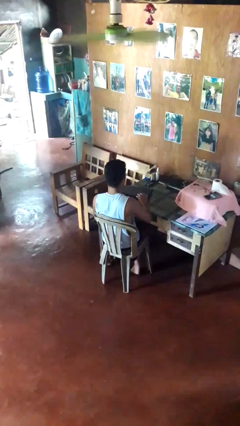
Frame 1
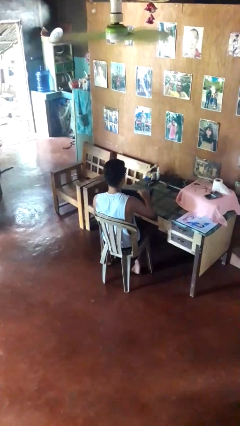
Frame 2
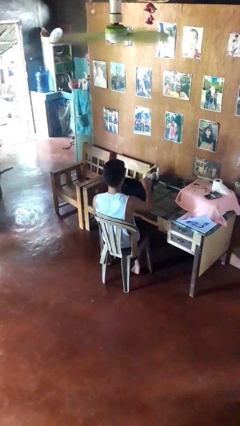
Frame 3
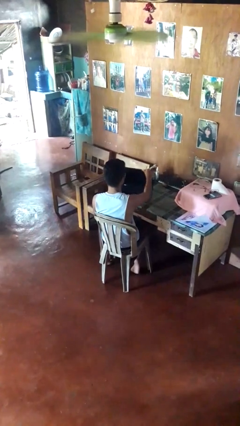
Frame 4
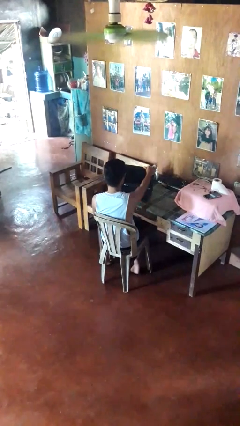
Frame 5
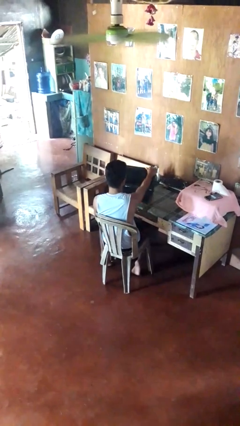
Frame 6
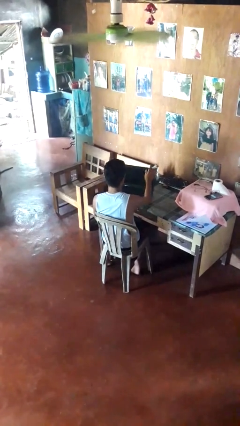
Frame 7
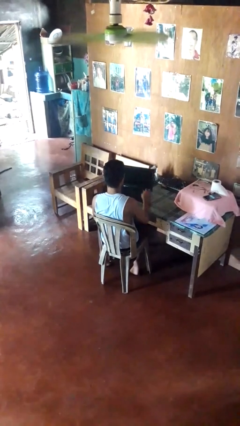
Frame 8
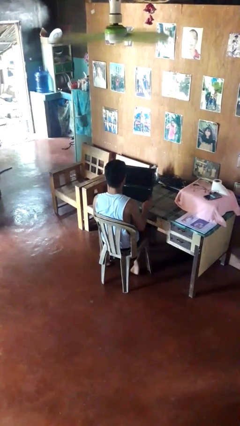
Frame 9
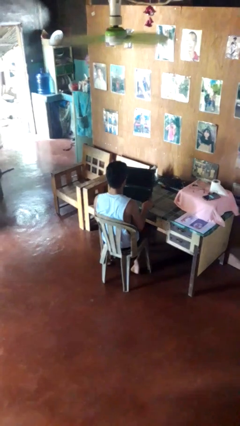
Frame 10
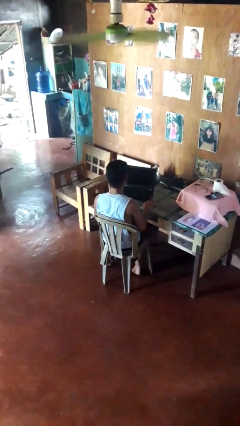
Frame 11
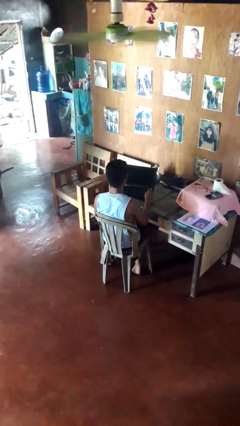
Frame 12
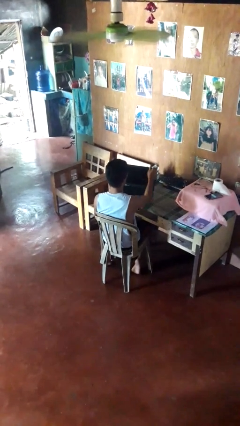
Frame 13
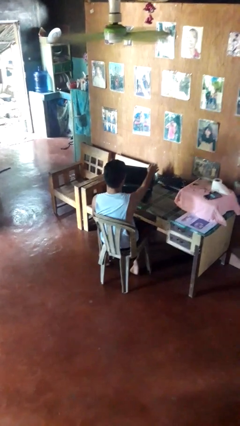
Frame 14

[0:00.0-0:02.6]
person opens laptop

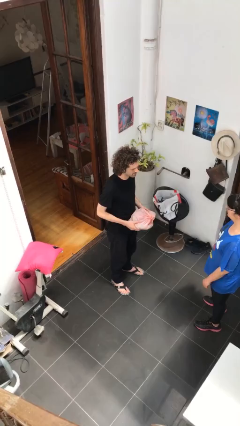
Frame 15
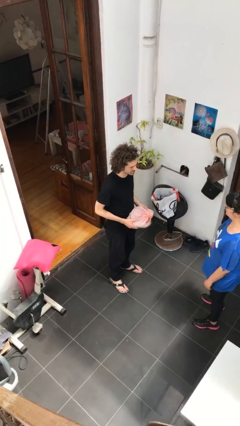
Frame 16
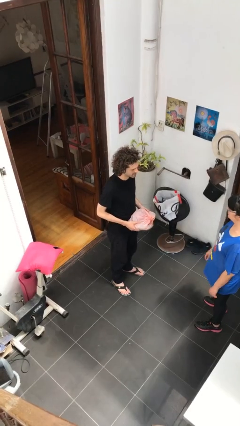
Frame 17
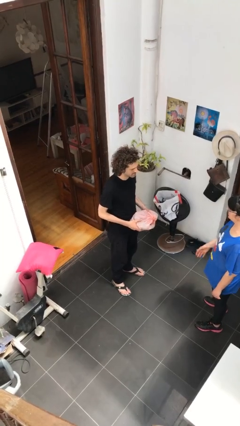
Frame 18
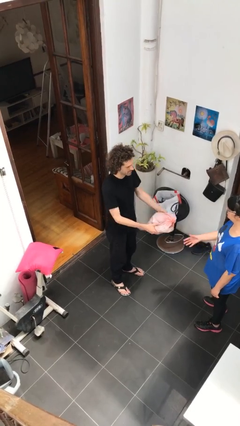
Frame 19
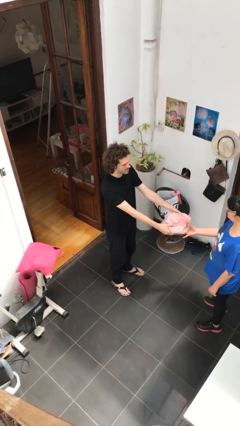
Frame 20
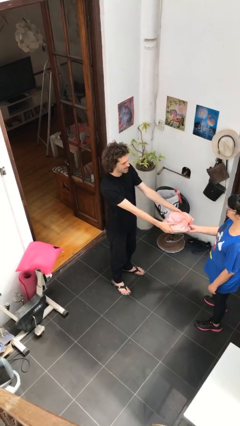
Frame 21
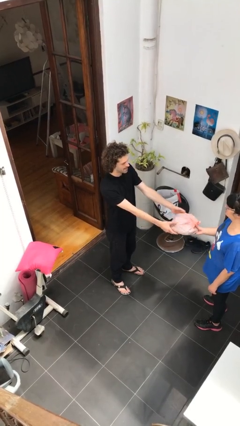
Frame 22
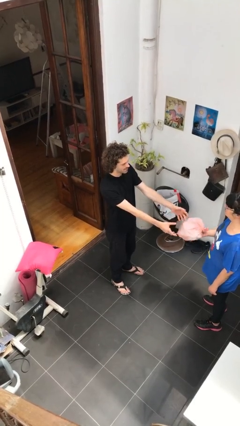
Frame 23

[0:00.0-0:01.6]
person transfers object to person

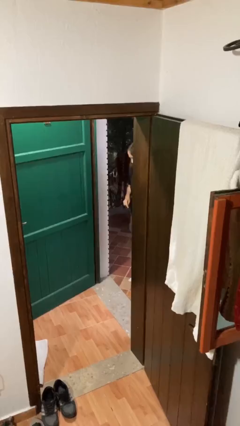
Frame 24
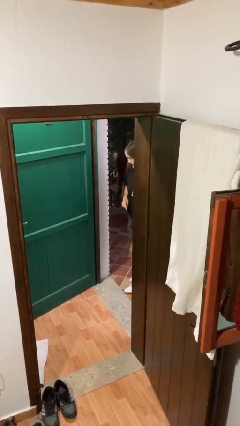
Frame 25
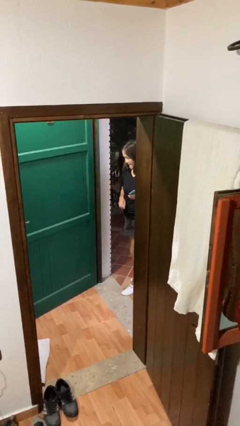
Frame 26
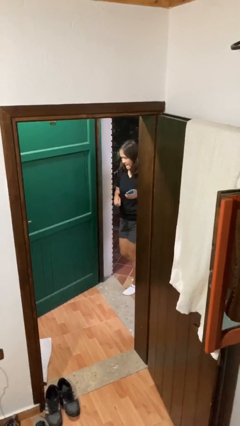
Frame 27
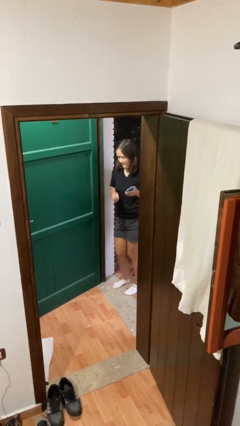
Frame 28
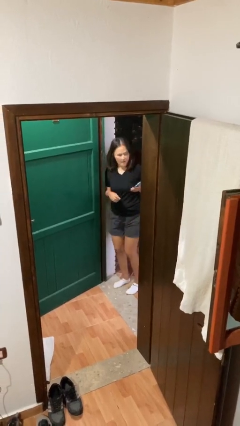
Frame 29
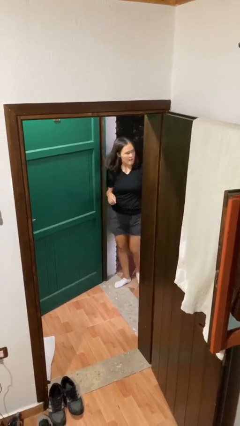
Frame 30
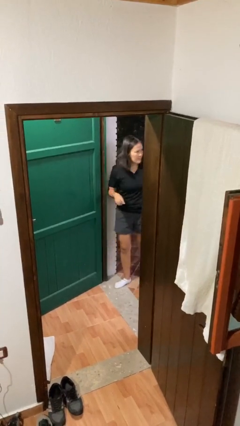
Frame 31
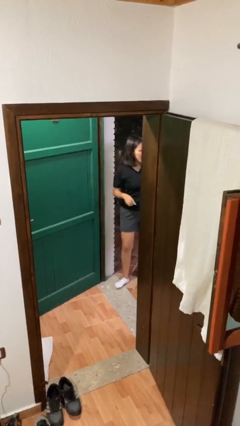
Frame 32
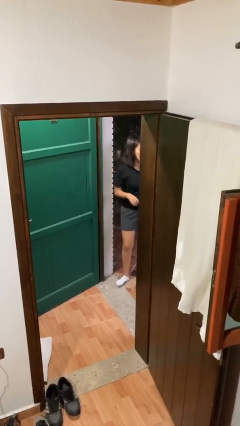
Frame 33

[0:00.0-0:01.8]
person bumps into wall

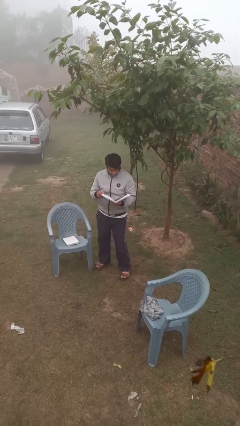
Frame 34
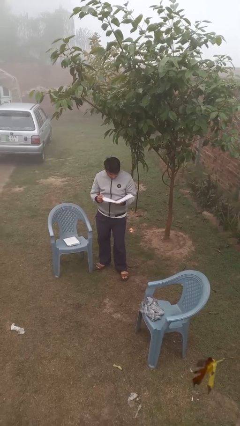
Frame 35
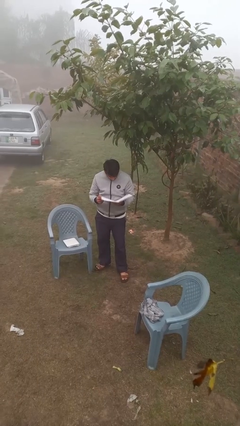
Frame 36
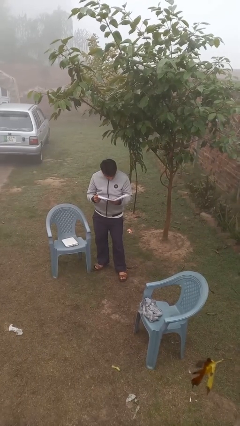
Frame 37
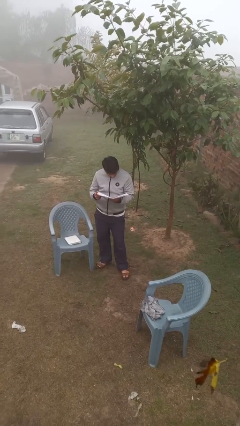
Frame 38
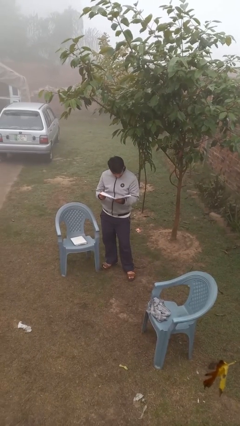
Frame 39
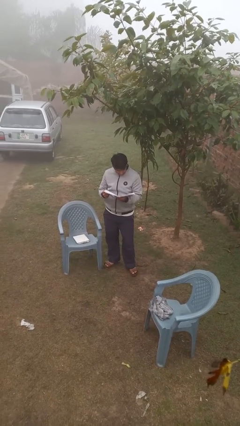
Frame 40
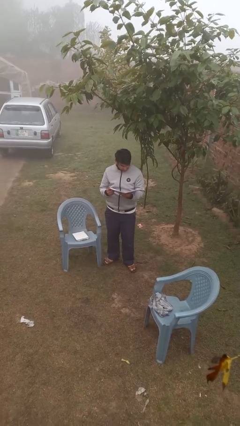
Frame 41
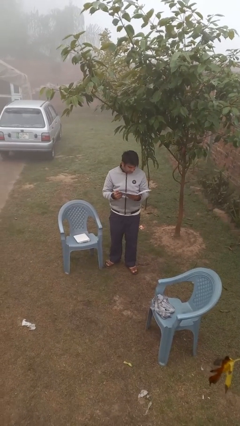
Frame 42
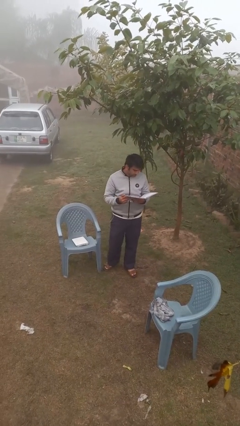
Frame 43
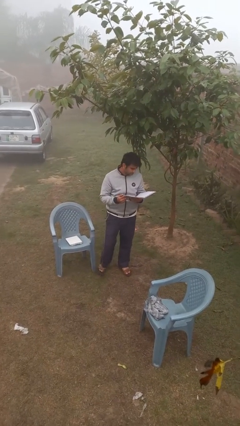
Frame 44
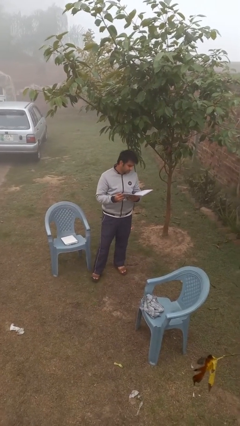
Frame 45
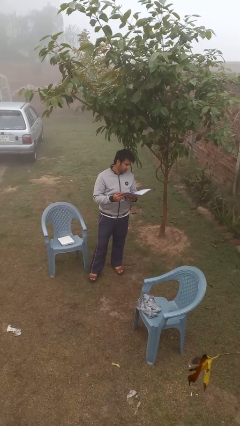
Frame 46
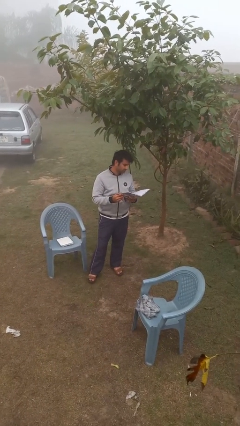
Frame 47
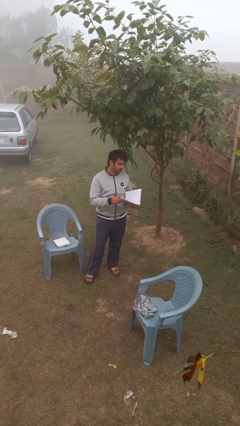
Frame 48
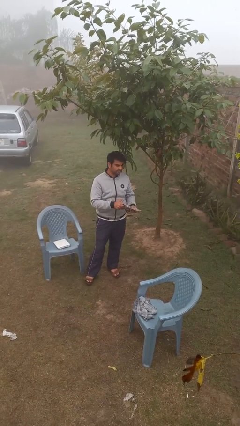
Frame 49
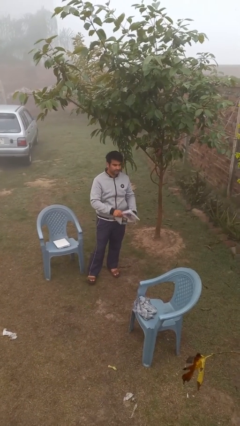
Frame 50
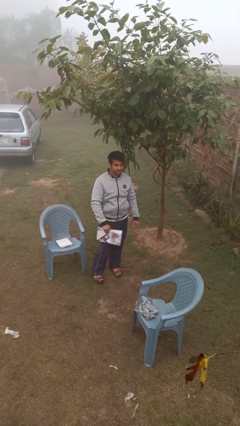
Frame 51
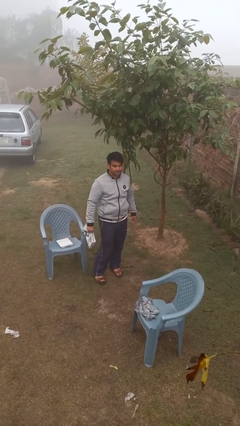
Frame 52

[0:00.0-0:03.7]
person reads document

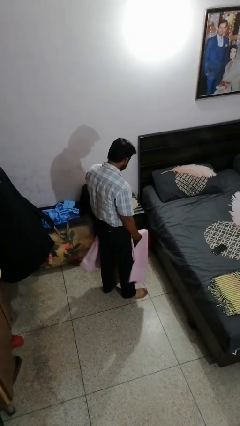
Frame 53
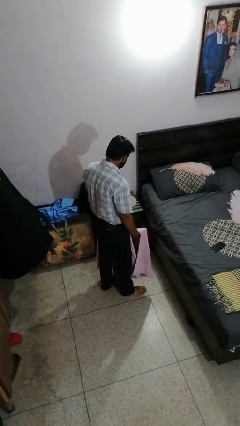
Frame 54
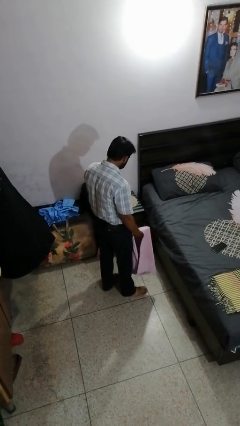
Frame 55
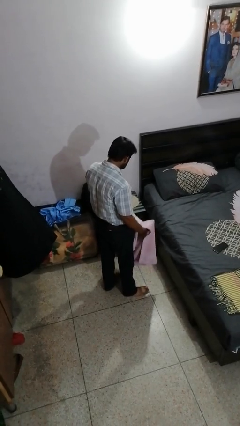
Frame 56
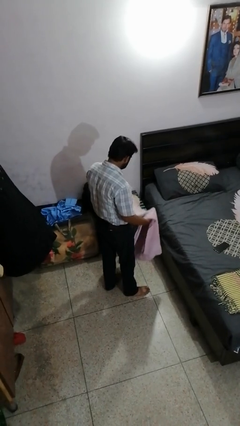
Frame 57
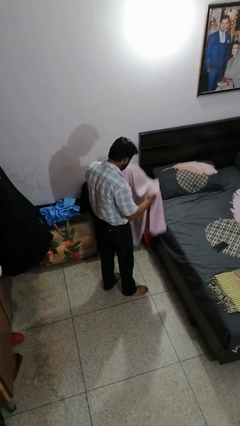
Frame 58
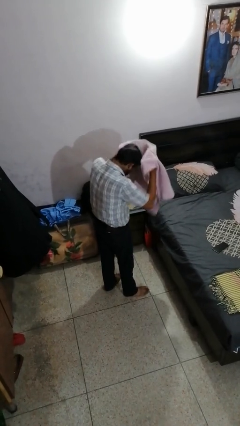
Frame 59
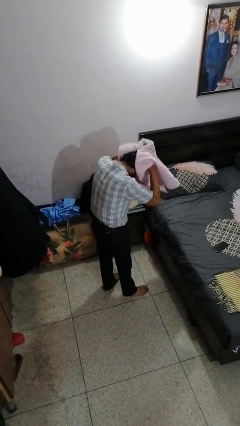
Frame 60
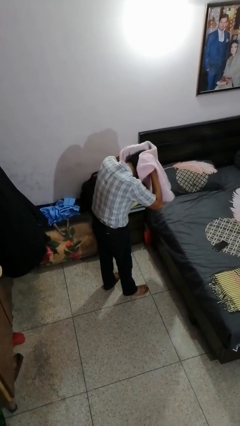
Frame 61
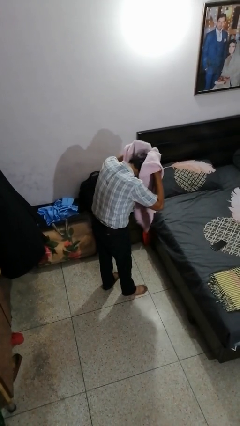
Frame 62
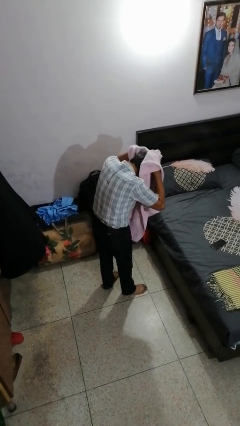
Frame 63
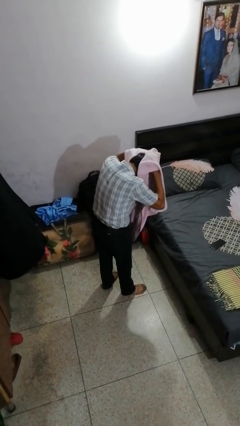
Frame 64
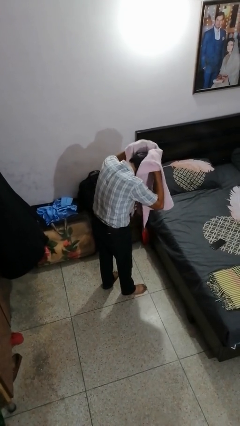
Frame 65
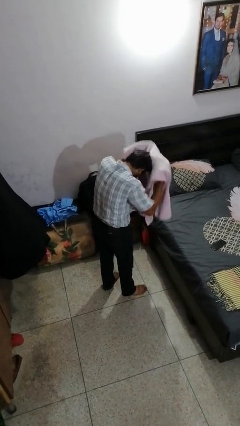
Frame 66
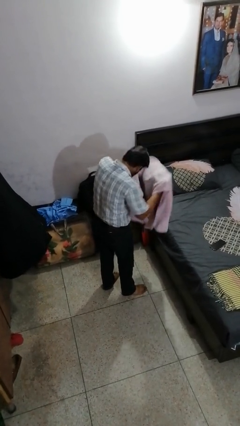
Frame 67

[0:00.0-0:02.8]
person dries hair with towel

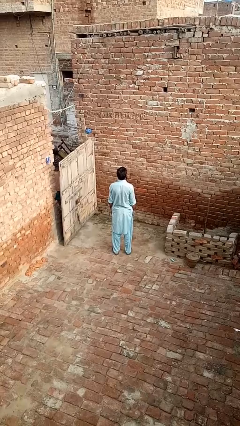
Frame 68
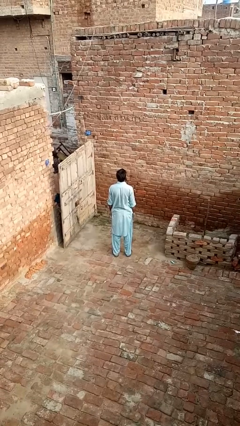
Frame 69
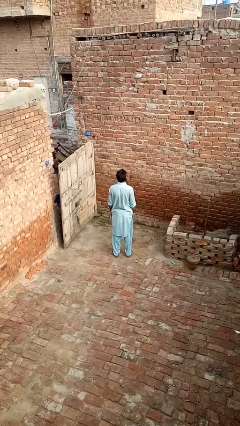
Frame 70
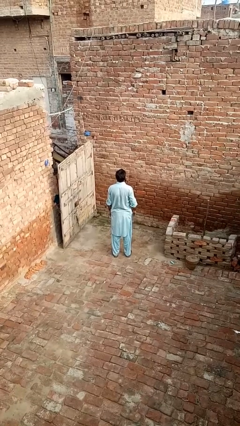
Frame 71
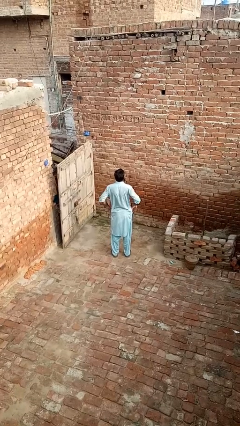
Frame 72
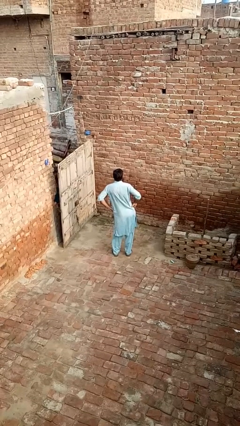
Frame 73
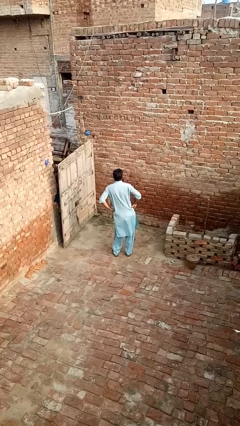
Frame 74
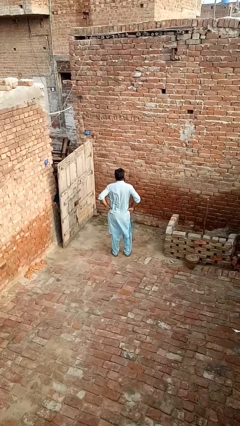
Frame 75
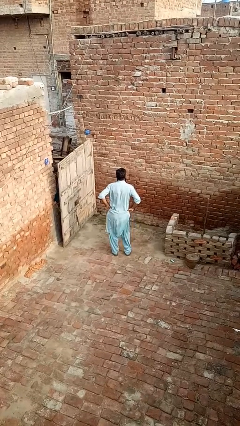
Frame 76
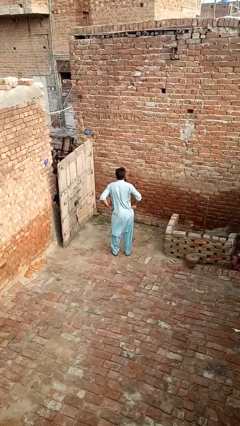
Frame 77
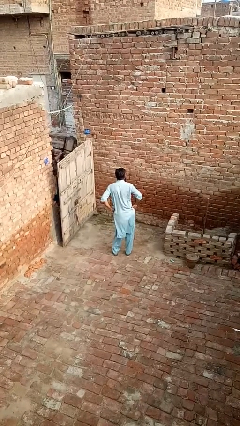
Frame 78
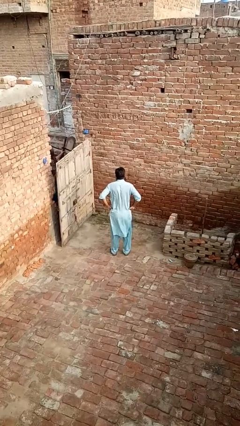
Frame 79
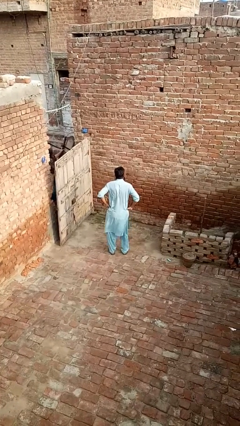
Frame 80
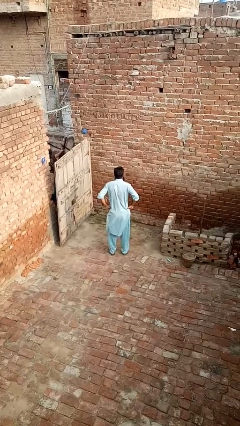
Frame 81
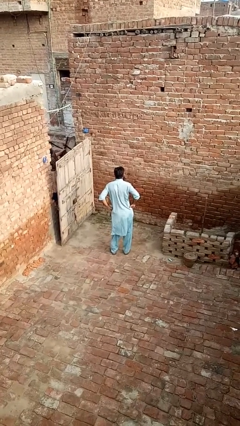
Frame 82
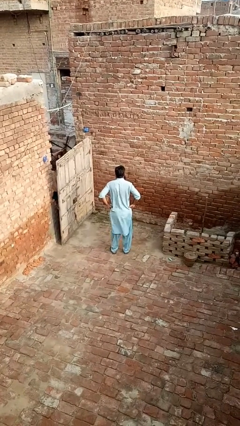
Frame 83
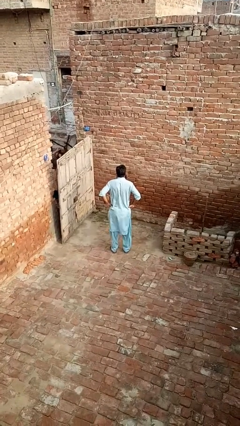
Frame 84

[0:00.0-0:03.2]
person wiggles hips

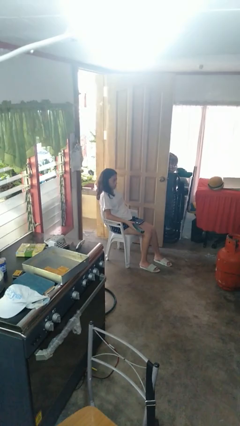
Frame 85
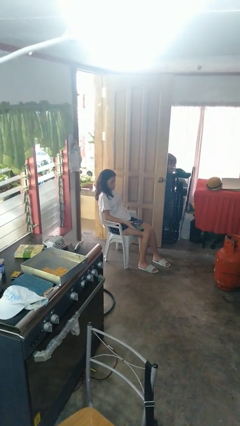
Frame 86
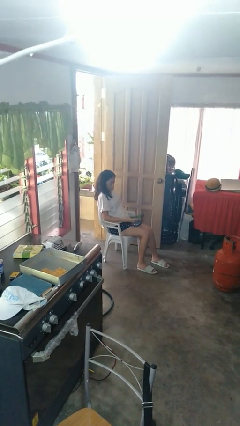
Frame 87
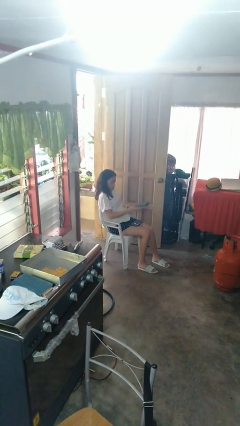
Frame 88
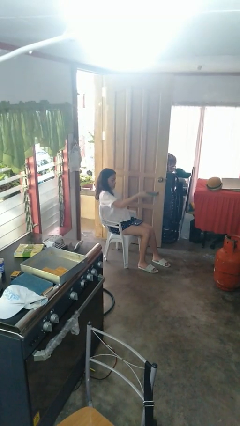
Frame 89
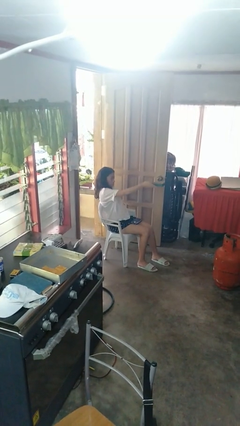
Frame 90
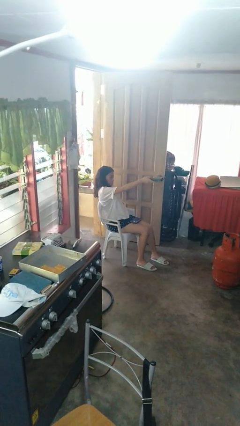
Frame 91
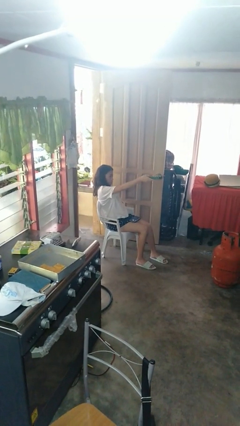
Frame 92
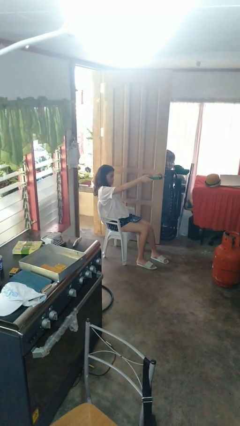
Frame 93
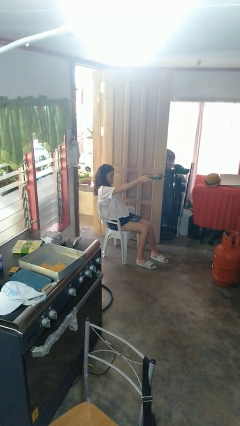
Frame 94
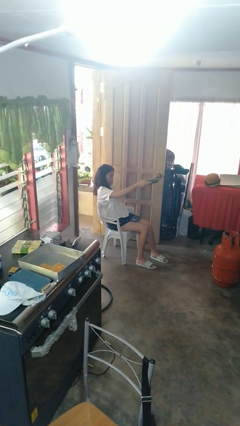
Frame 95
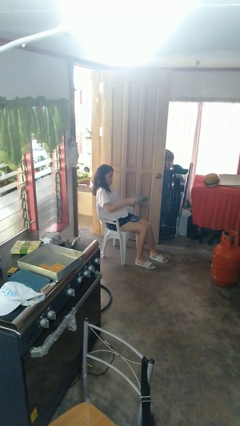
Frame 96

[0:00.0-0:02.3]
person uses television remote
